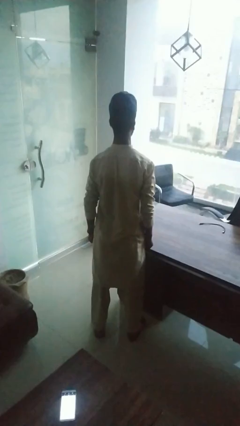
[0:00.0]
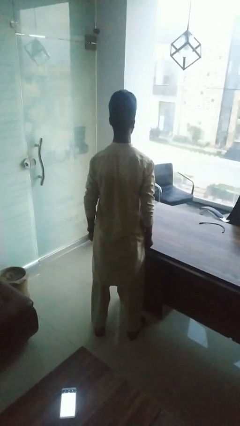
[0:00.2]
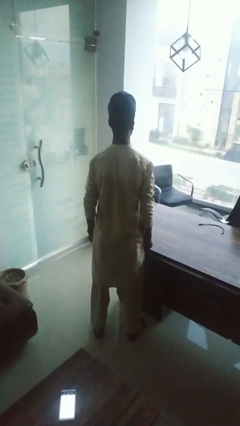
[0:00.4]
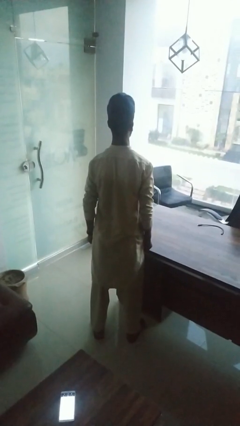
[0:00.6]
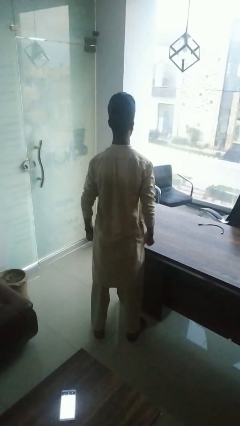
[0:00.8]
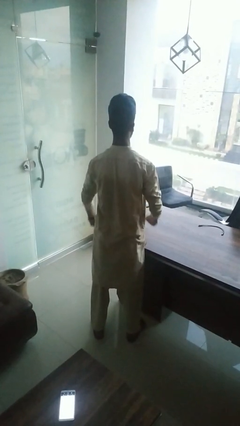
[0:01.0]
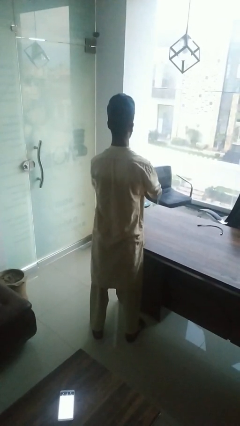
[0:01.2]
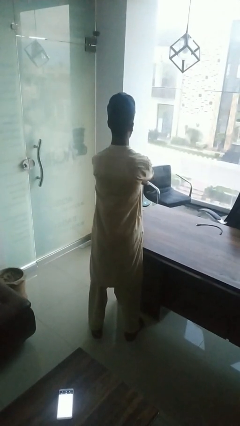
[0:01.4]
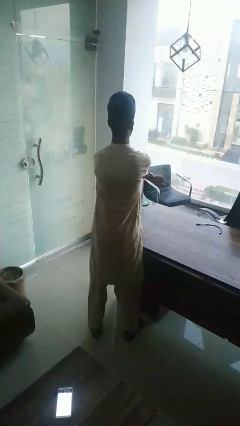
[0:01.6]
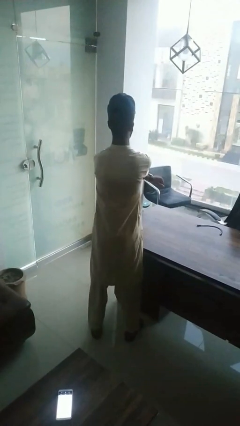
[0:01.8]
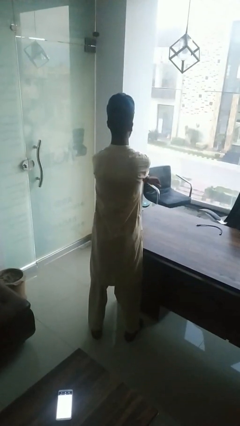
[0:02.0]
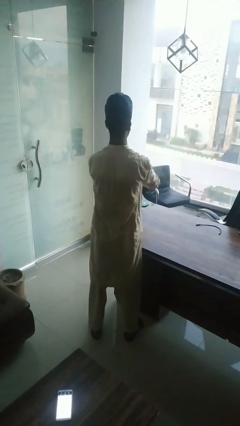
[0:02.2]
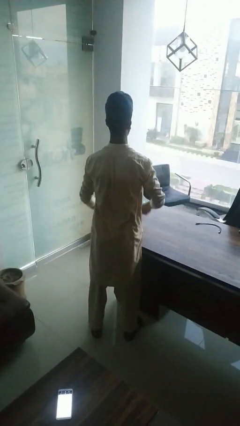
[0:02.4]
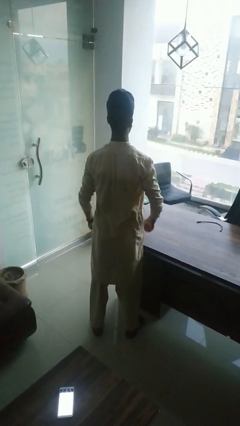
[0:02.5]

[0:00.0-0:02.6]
person gestures arms x

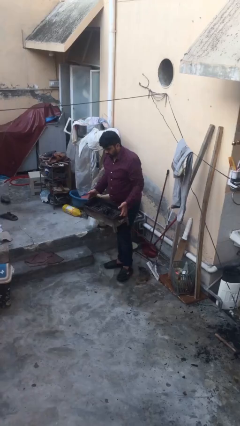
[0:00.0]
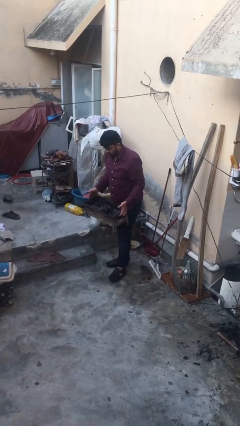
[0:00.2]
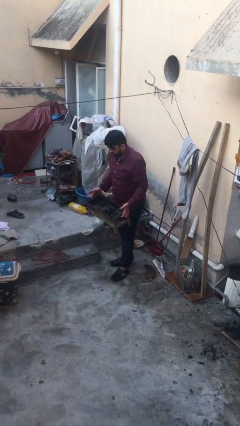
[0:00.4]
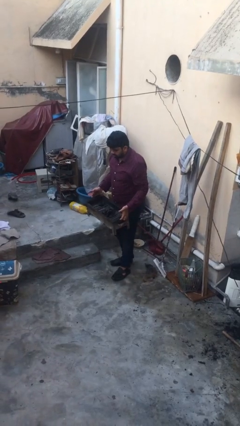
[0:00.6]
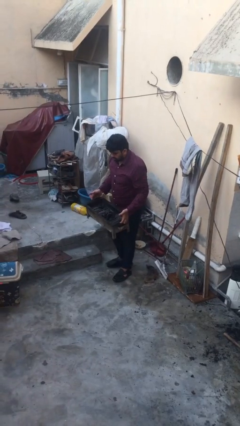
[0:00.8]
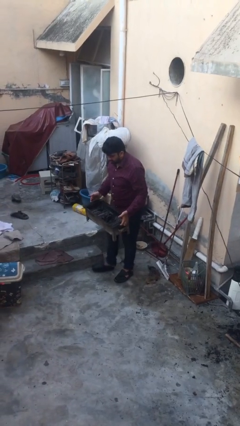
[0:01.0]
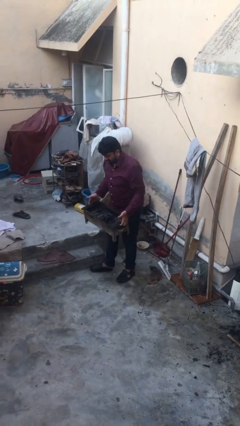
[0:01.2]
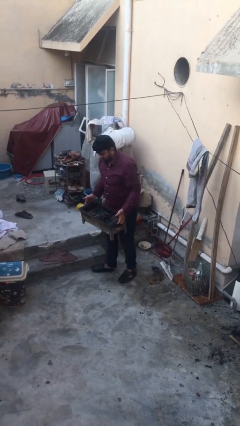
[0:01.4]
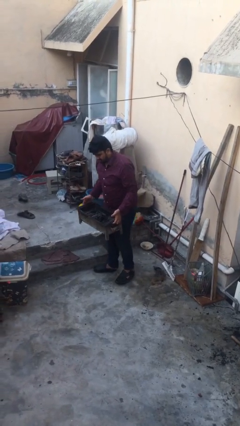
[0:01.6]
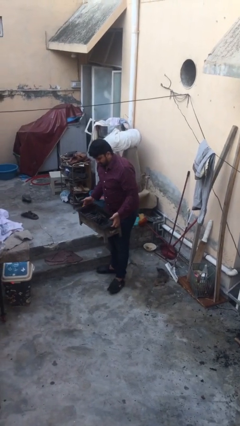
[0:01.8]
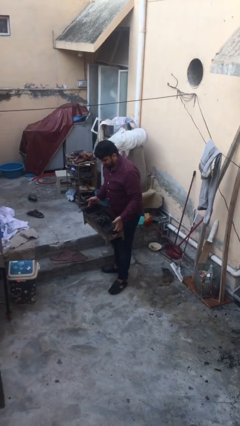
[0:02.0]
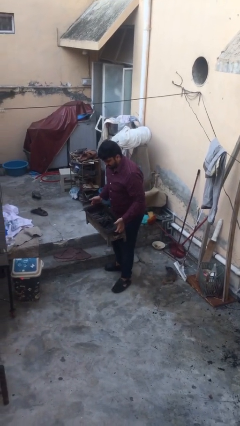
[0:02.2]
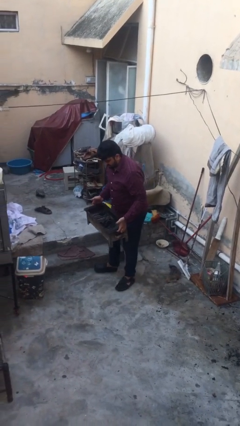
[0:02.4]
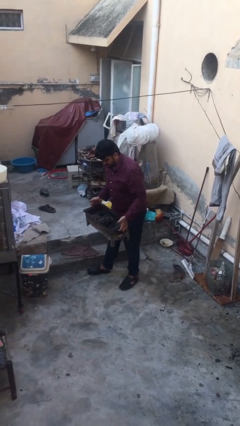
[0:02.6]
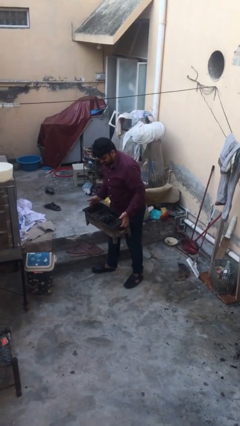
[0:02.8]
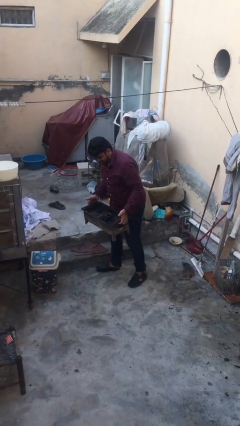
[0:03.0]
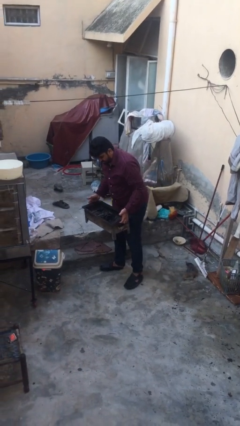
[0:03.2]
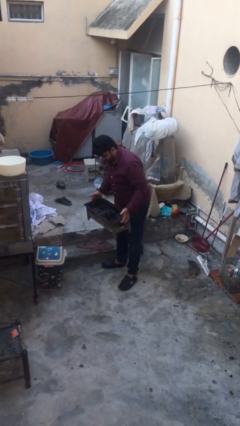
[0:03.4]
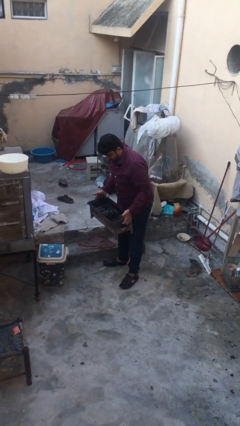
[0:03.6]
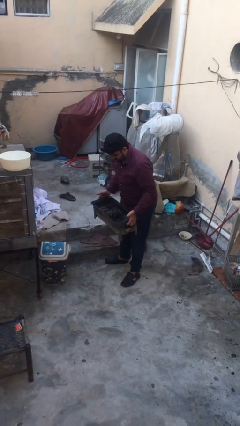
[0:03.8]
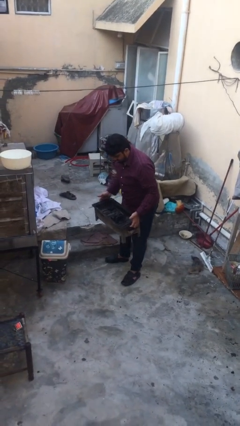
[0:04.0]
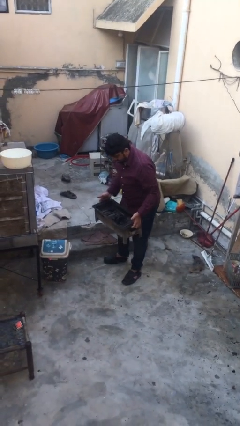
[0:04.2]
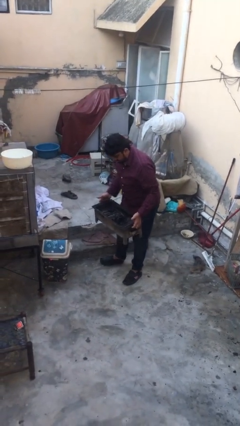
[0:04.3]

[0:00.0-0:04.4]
person carries heavy object

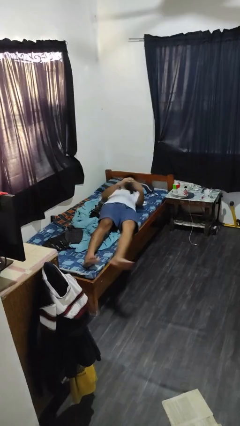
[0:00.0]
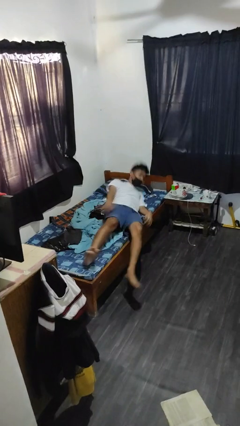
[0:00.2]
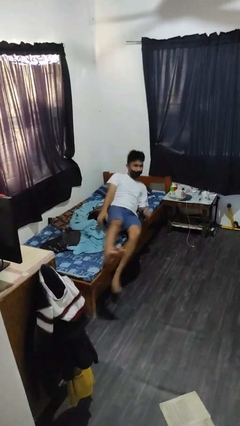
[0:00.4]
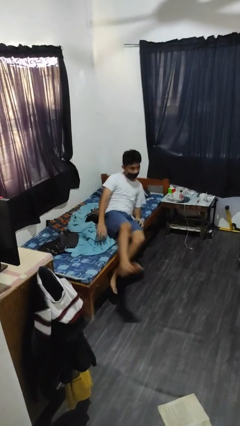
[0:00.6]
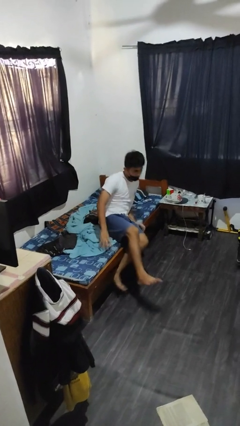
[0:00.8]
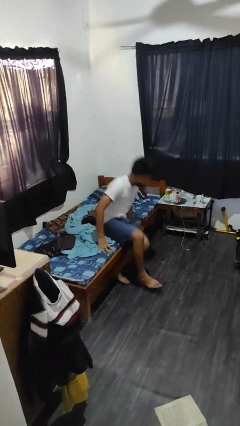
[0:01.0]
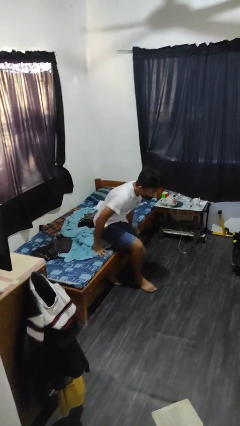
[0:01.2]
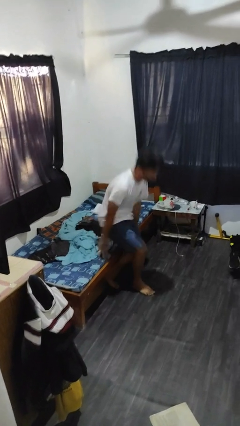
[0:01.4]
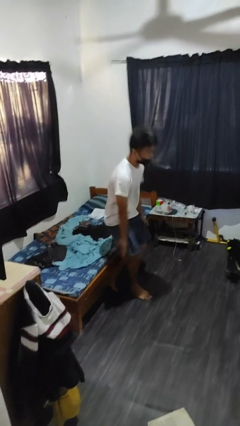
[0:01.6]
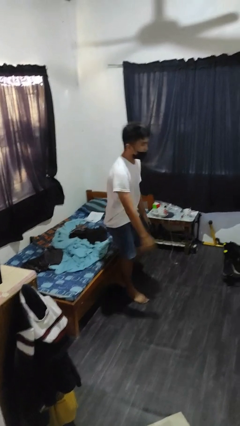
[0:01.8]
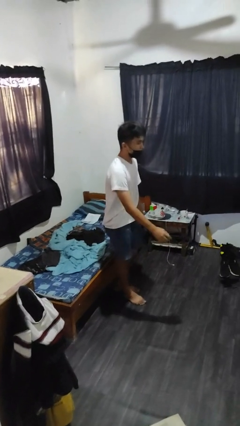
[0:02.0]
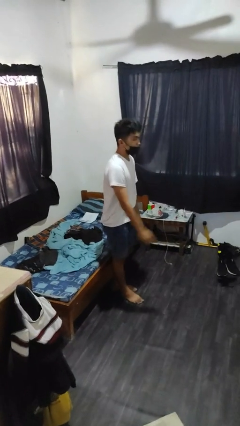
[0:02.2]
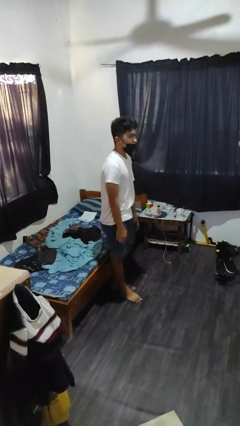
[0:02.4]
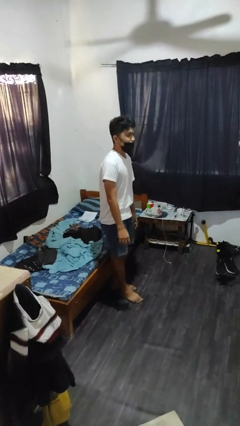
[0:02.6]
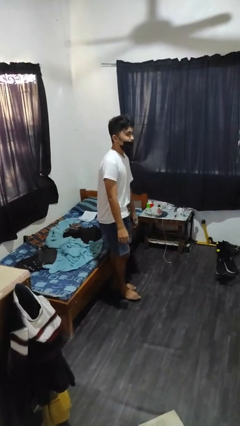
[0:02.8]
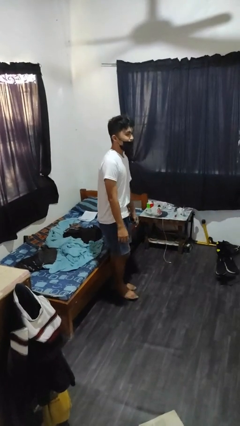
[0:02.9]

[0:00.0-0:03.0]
person stands up

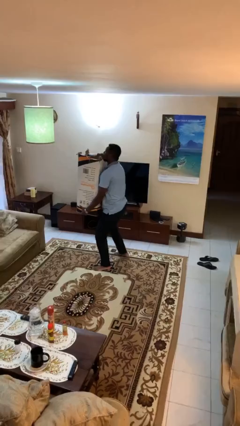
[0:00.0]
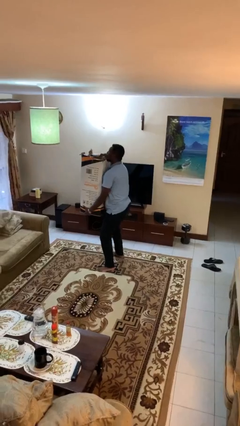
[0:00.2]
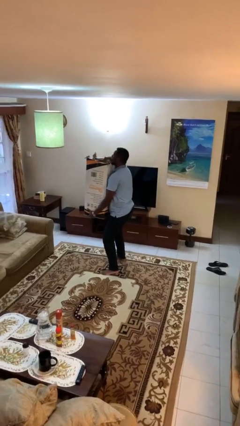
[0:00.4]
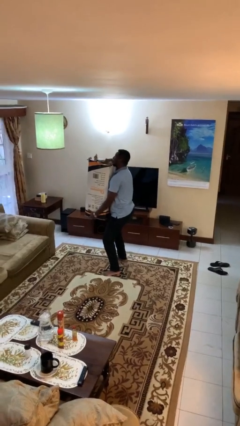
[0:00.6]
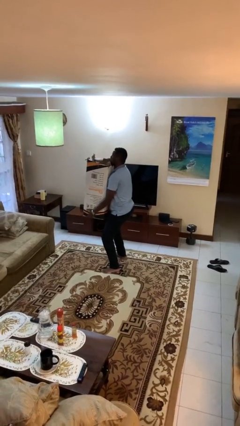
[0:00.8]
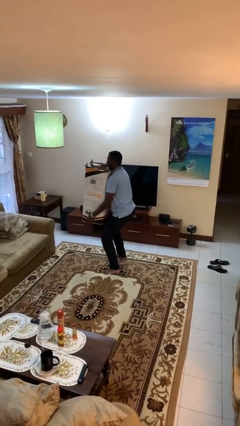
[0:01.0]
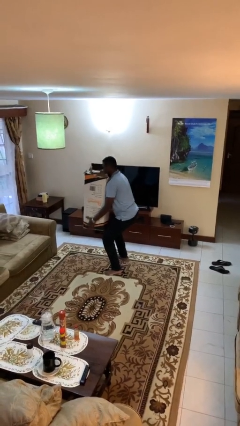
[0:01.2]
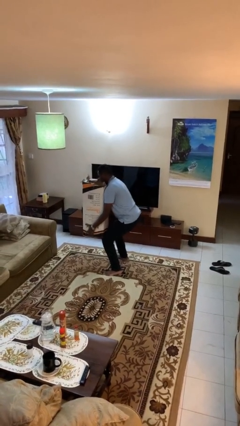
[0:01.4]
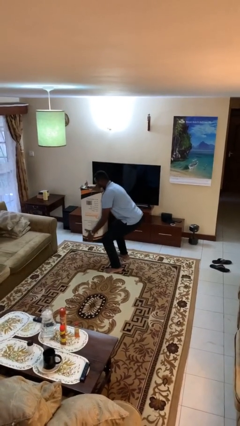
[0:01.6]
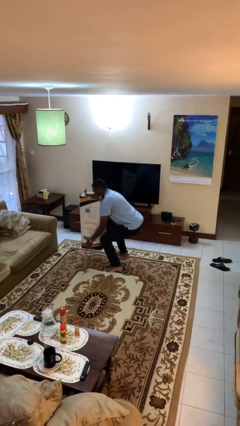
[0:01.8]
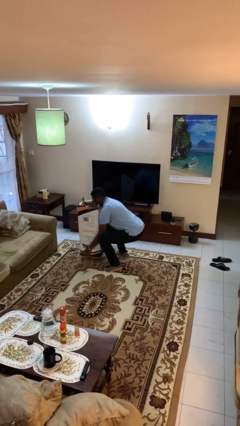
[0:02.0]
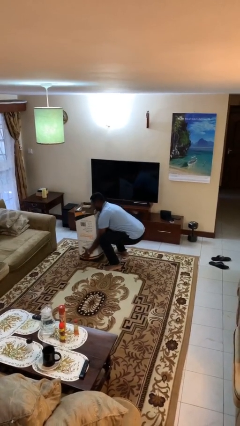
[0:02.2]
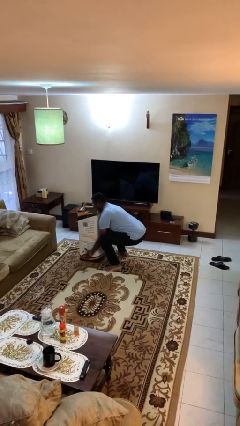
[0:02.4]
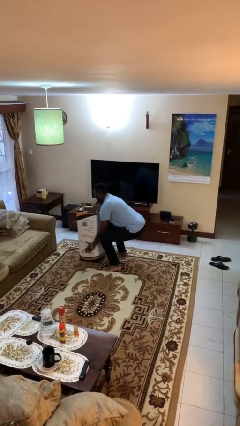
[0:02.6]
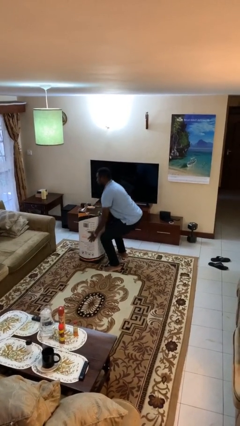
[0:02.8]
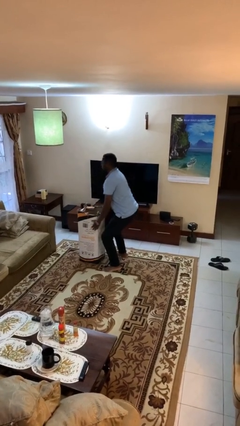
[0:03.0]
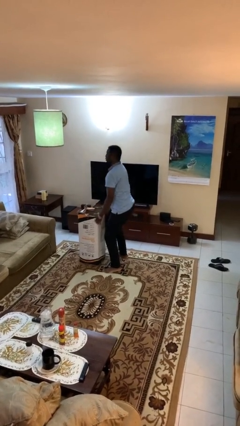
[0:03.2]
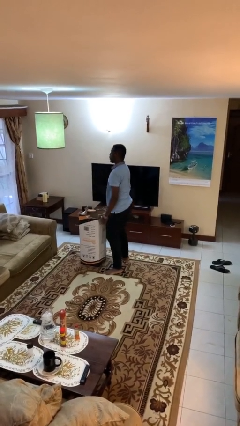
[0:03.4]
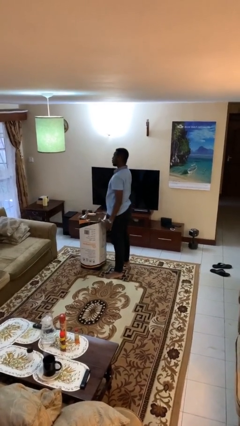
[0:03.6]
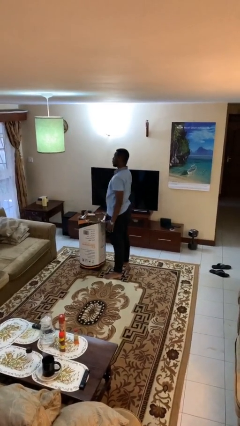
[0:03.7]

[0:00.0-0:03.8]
person puts down object on floor

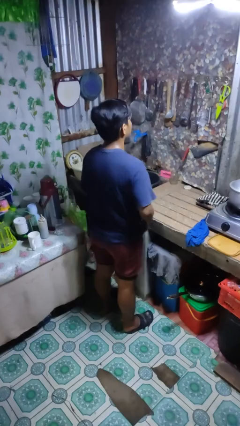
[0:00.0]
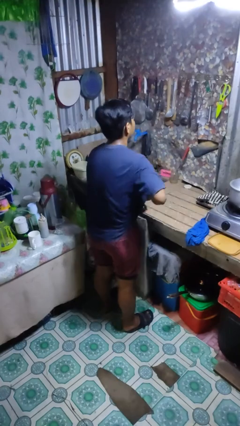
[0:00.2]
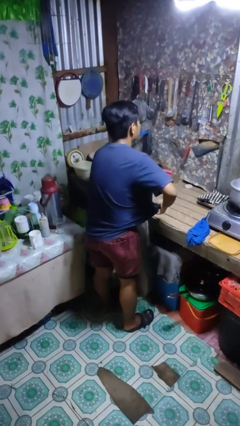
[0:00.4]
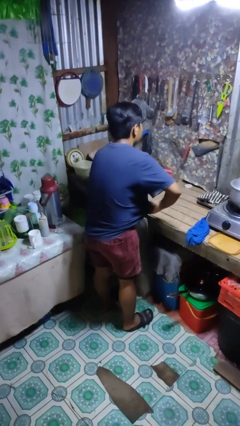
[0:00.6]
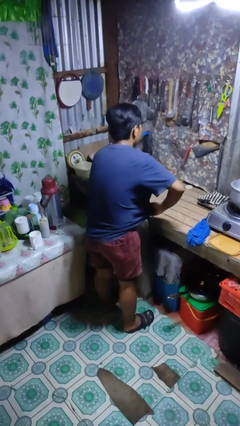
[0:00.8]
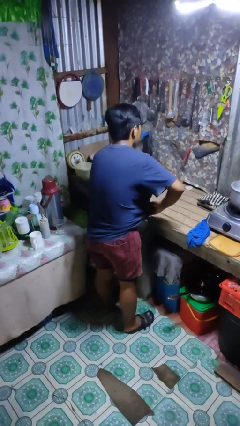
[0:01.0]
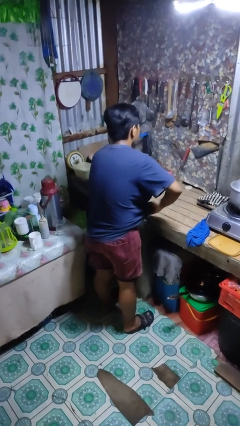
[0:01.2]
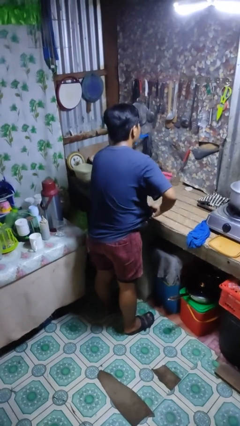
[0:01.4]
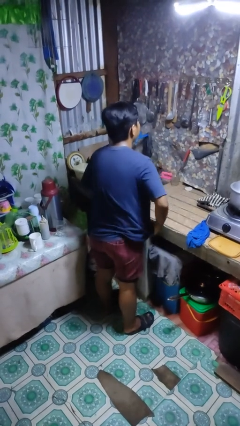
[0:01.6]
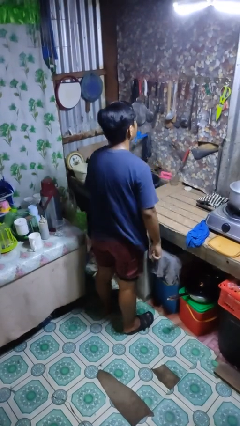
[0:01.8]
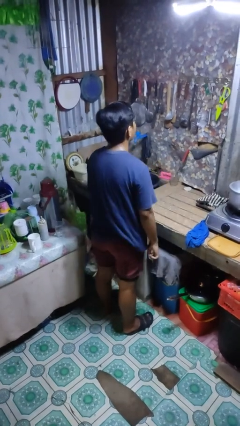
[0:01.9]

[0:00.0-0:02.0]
person applies deodorant

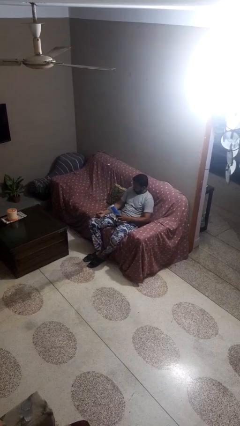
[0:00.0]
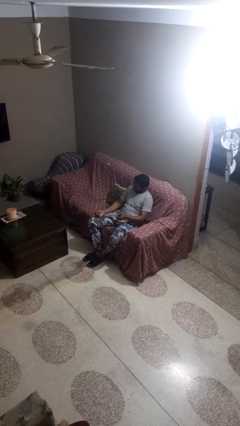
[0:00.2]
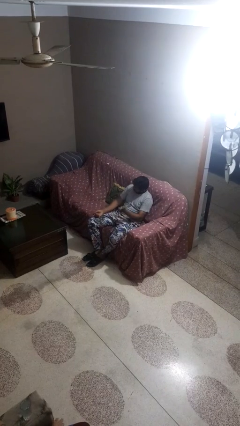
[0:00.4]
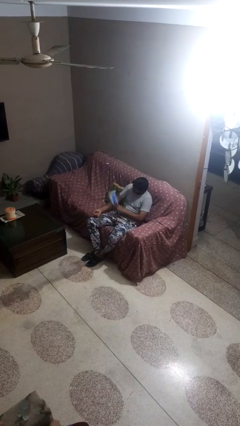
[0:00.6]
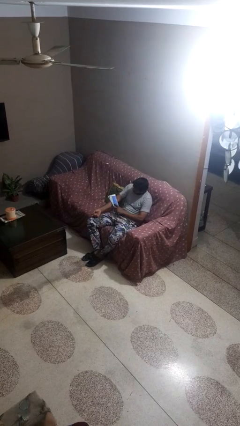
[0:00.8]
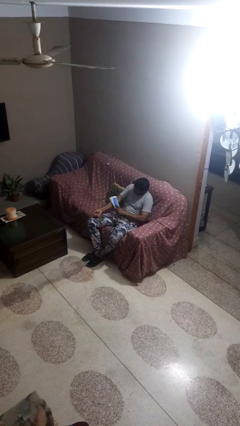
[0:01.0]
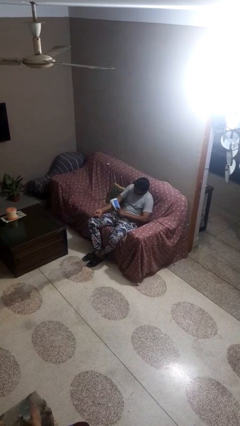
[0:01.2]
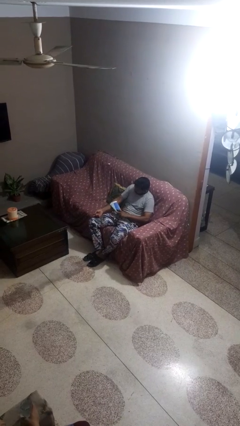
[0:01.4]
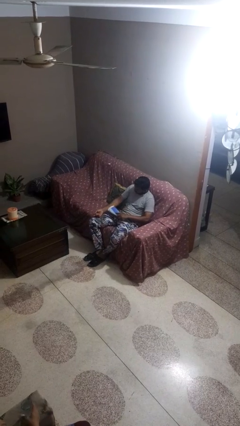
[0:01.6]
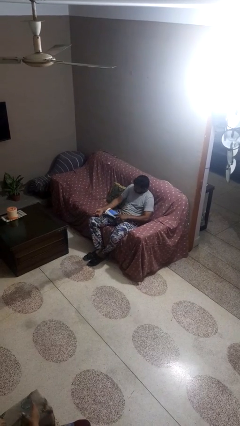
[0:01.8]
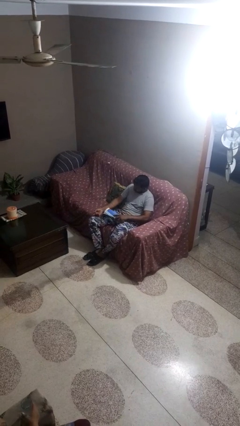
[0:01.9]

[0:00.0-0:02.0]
person swats bug
